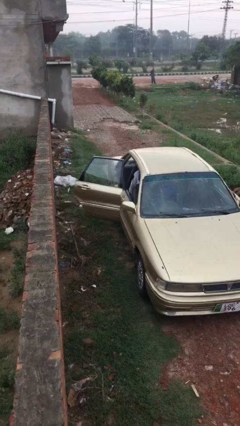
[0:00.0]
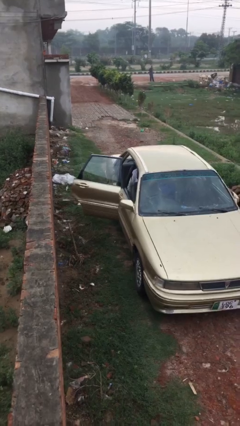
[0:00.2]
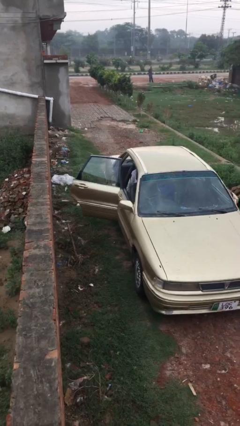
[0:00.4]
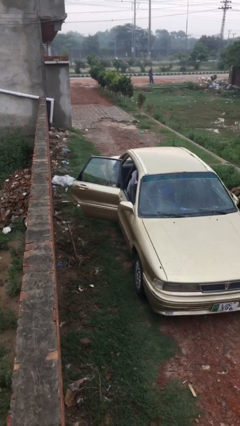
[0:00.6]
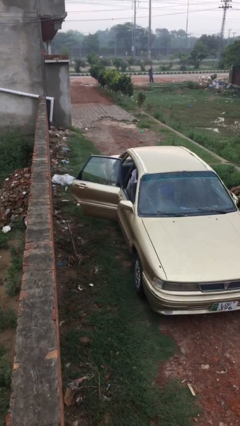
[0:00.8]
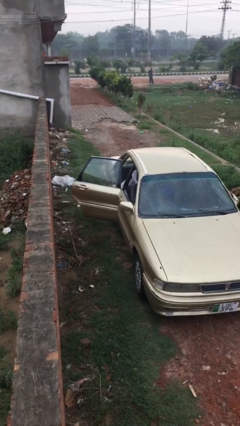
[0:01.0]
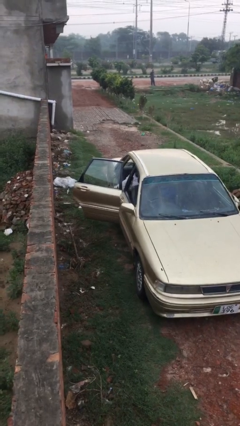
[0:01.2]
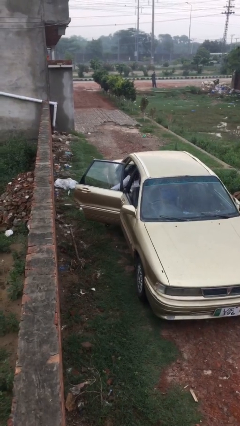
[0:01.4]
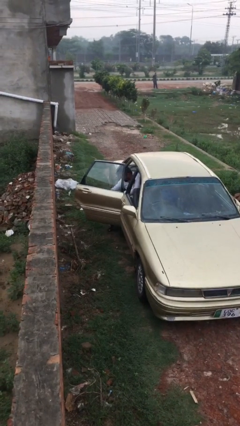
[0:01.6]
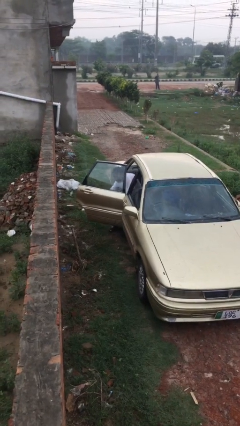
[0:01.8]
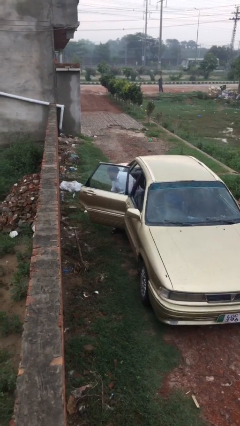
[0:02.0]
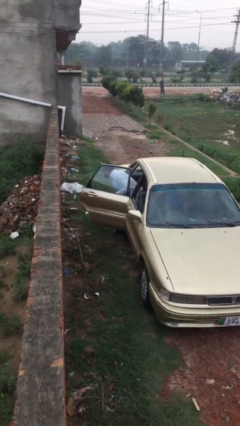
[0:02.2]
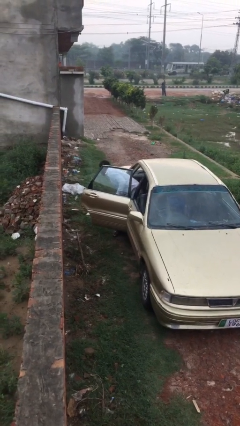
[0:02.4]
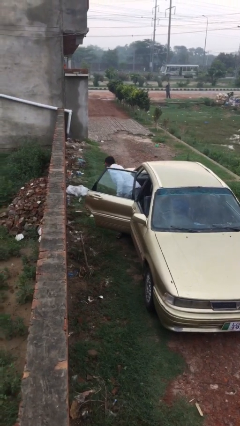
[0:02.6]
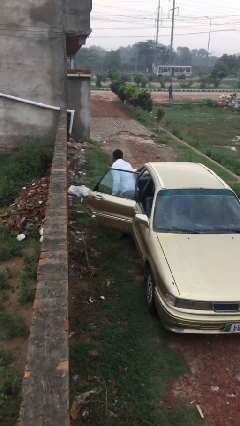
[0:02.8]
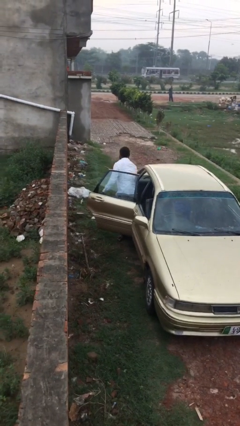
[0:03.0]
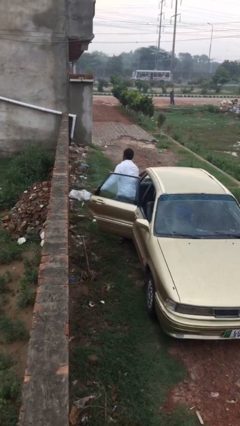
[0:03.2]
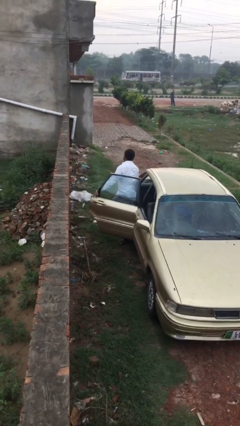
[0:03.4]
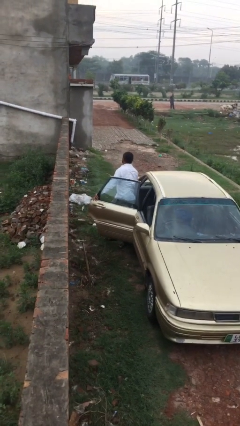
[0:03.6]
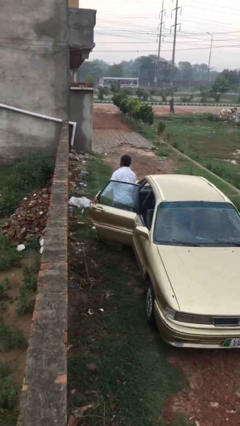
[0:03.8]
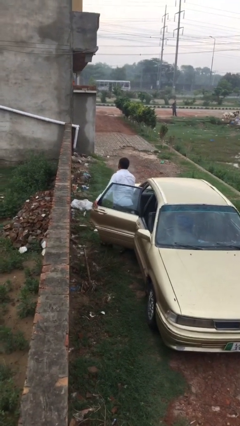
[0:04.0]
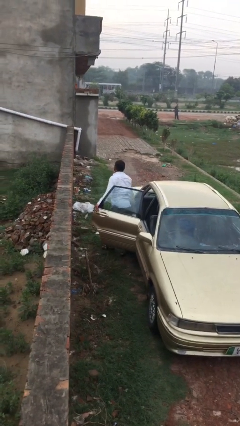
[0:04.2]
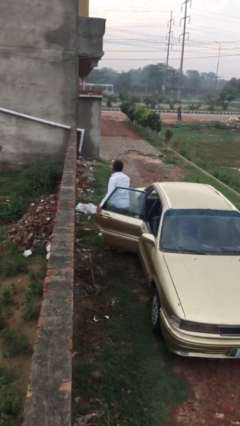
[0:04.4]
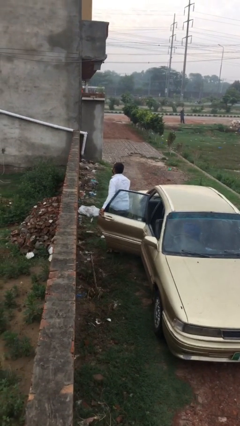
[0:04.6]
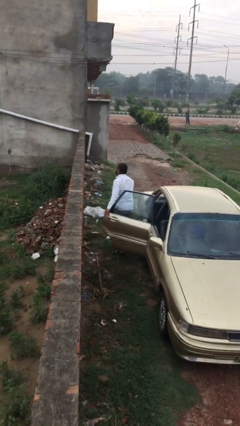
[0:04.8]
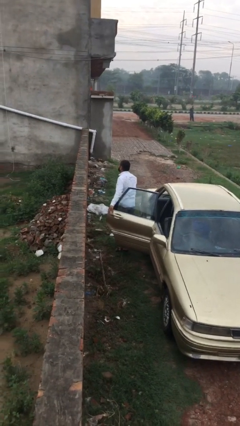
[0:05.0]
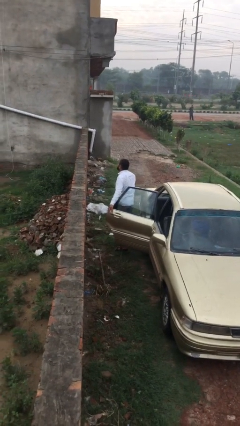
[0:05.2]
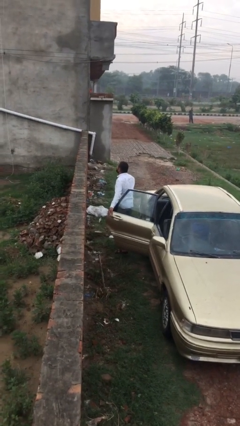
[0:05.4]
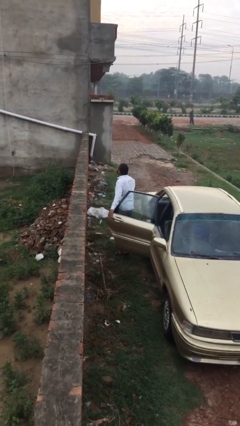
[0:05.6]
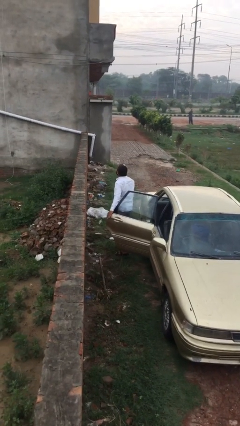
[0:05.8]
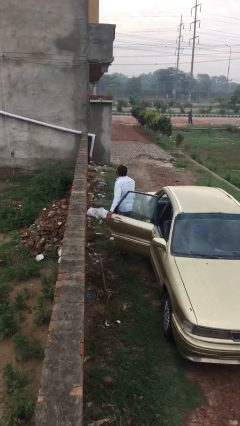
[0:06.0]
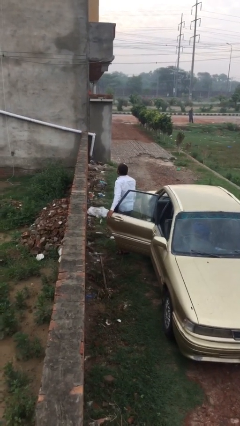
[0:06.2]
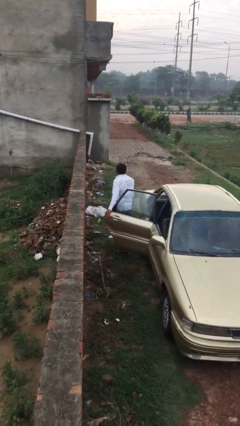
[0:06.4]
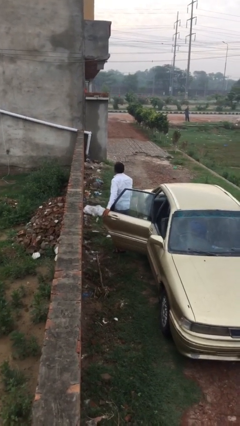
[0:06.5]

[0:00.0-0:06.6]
person exits car

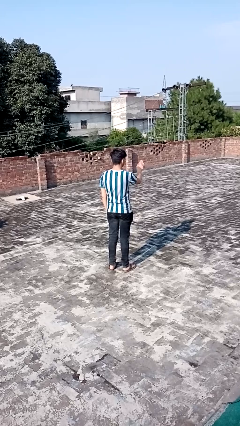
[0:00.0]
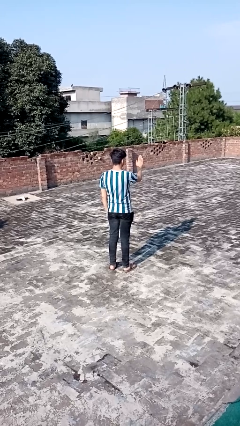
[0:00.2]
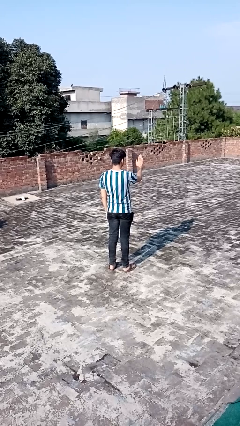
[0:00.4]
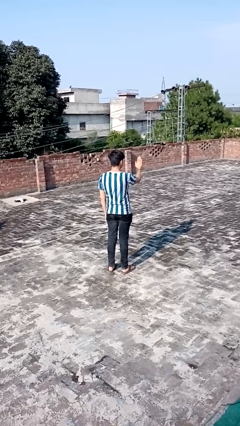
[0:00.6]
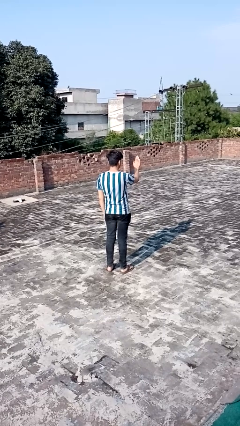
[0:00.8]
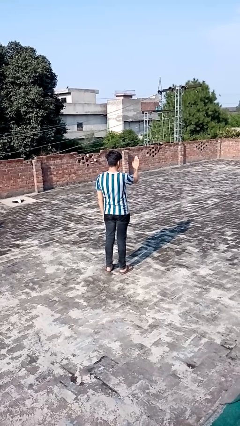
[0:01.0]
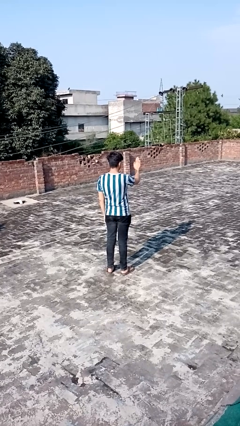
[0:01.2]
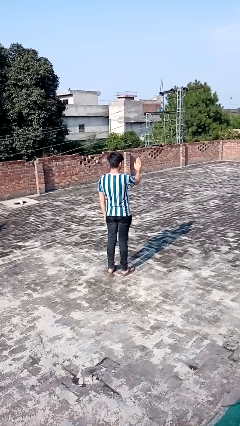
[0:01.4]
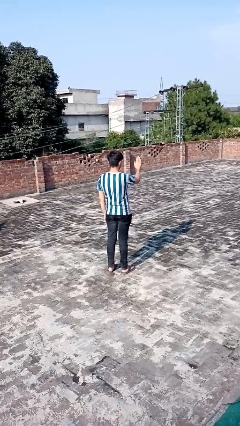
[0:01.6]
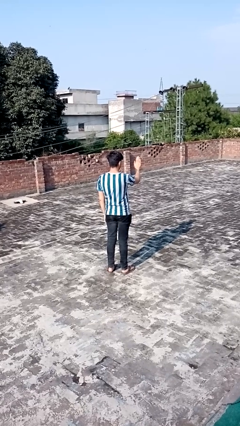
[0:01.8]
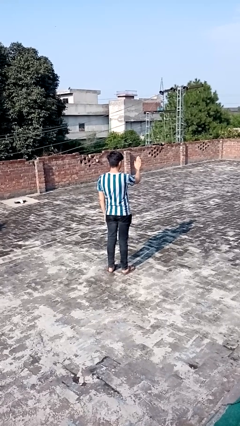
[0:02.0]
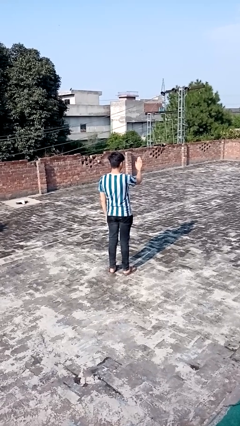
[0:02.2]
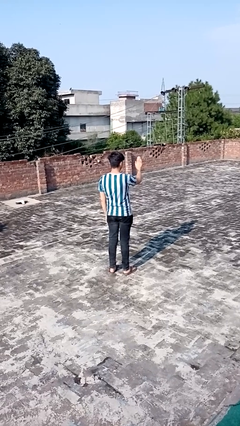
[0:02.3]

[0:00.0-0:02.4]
person gestures stop

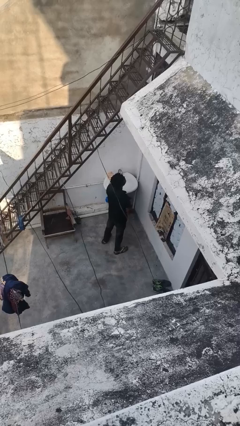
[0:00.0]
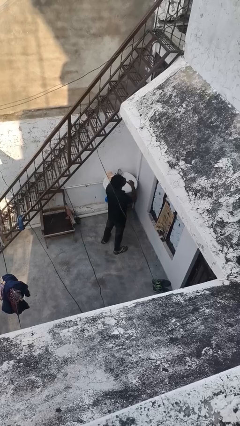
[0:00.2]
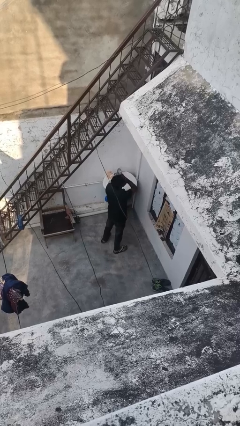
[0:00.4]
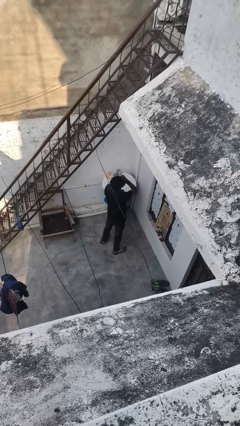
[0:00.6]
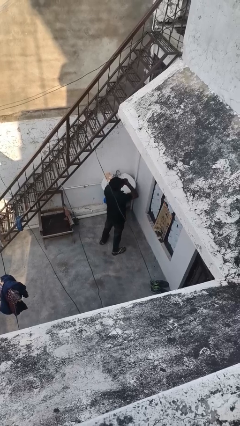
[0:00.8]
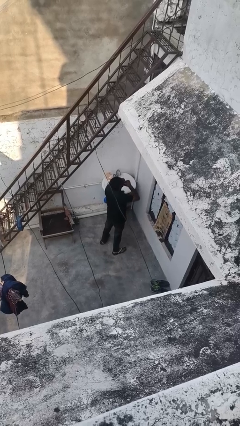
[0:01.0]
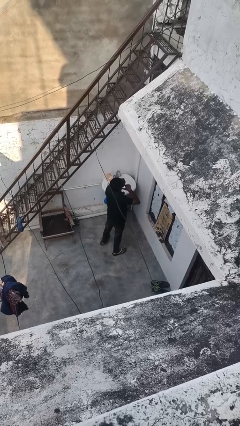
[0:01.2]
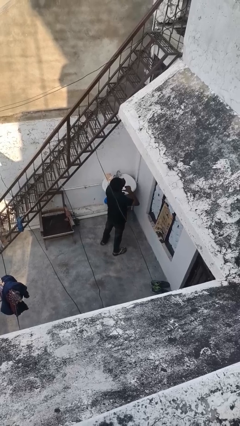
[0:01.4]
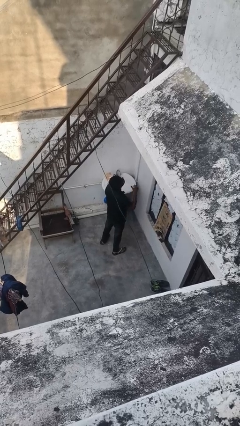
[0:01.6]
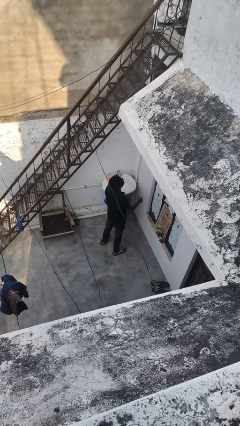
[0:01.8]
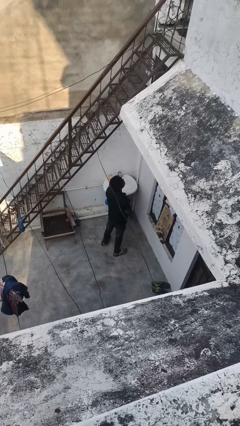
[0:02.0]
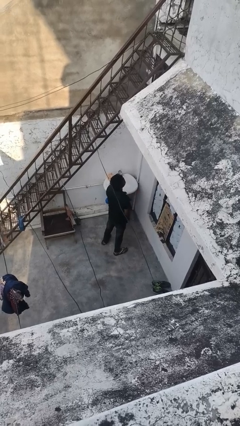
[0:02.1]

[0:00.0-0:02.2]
person gestures cut

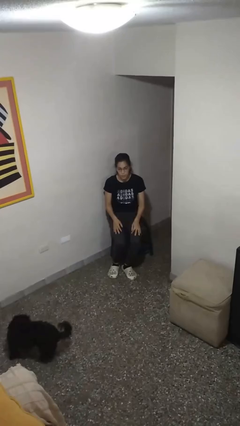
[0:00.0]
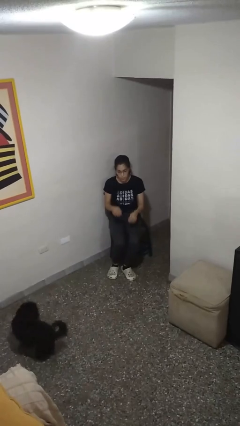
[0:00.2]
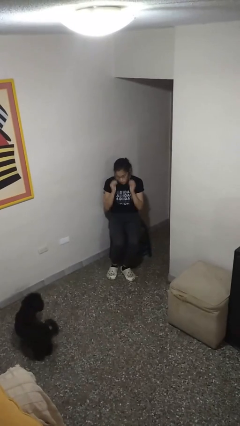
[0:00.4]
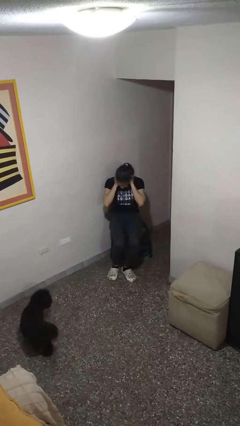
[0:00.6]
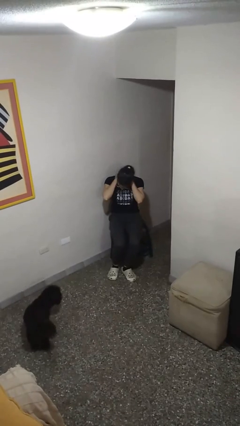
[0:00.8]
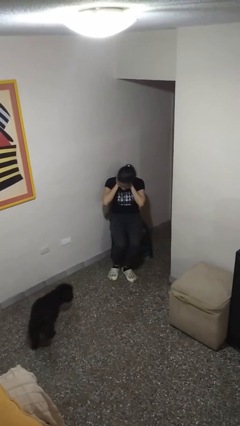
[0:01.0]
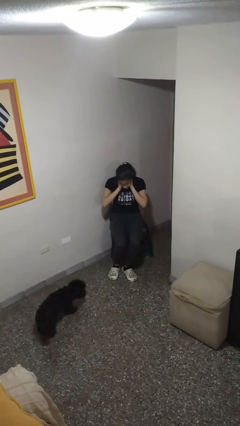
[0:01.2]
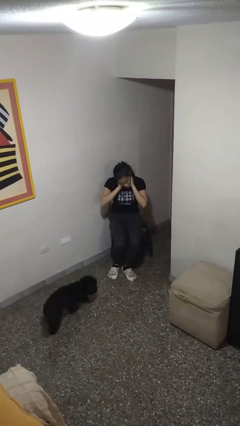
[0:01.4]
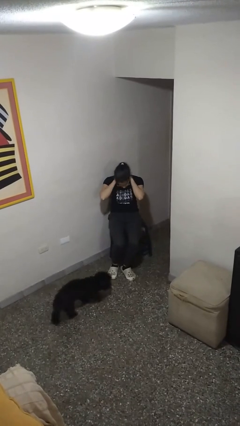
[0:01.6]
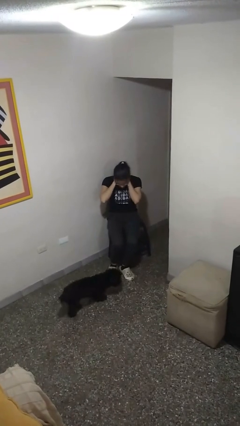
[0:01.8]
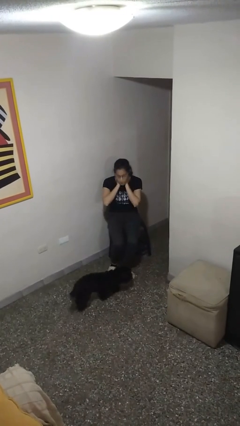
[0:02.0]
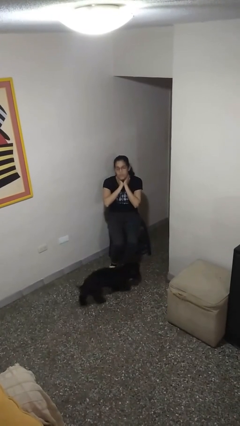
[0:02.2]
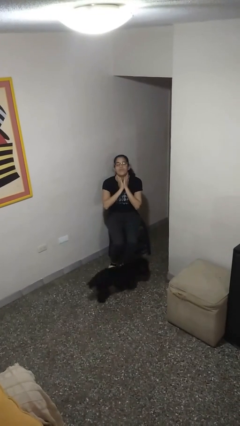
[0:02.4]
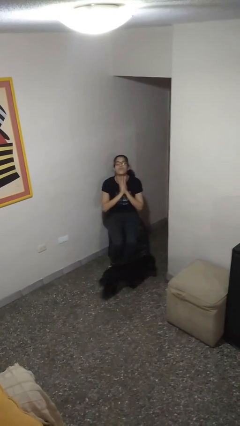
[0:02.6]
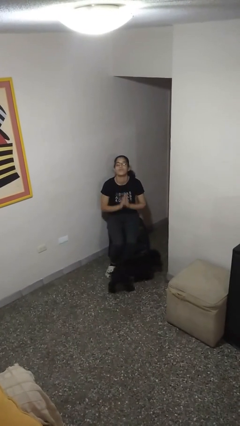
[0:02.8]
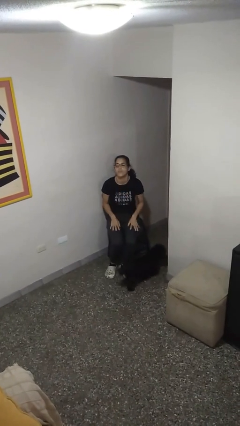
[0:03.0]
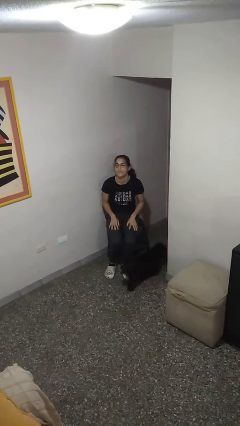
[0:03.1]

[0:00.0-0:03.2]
person rubs neck

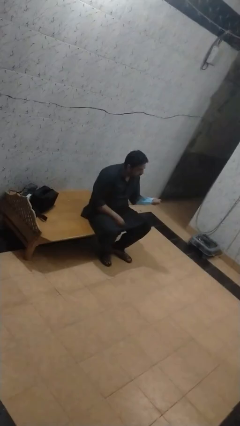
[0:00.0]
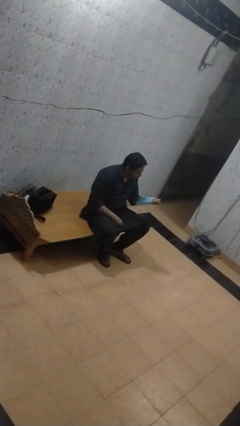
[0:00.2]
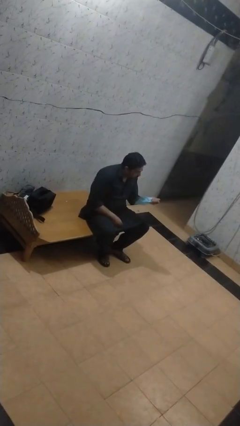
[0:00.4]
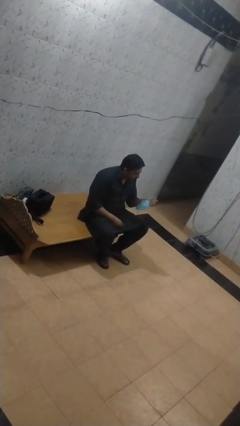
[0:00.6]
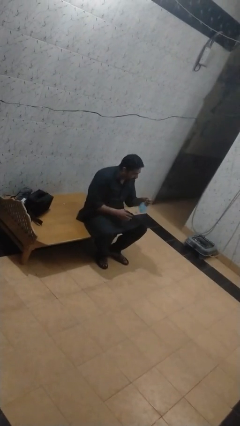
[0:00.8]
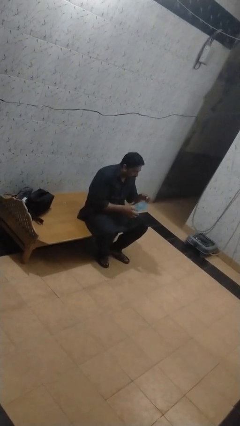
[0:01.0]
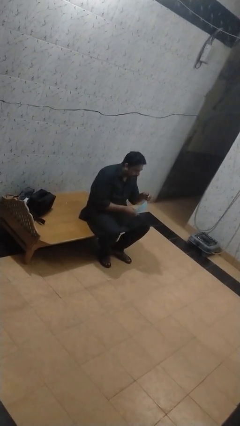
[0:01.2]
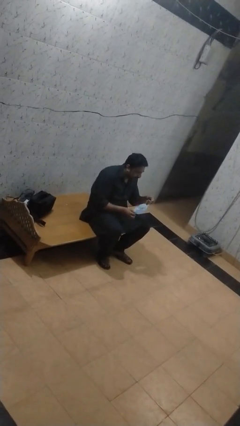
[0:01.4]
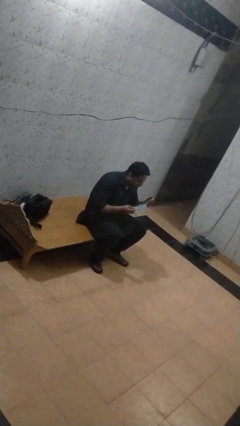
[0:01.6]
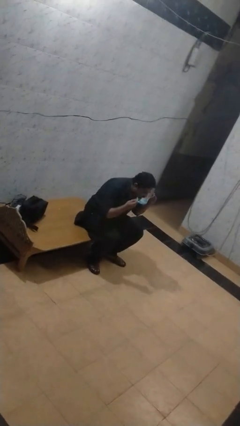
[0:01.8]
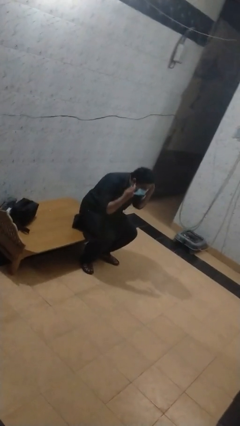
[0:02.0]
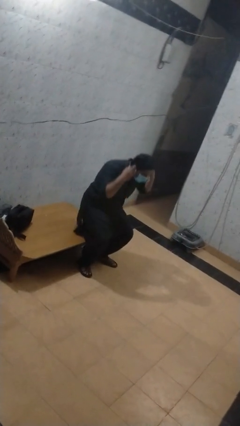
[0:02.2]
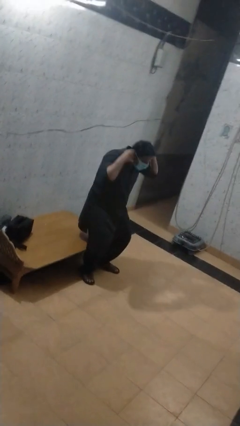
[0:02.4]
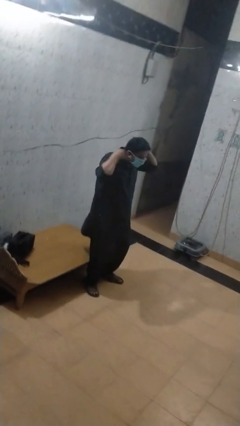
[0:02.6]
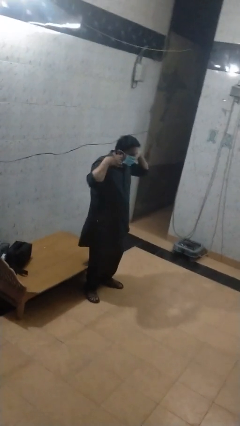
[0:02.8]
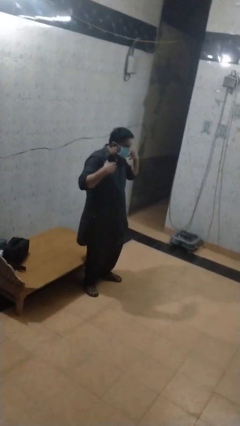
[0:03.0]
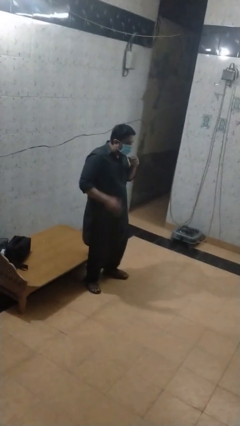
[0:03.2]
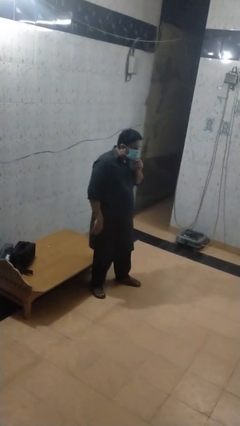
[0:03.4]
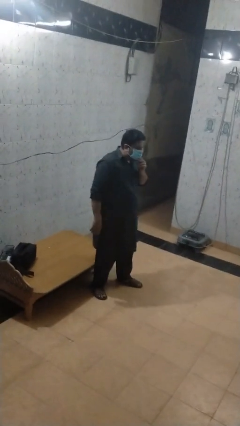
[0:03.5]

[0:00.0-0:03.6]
person puts on facemask
